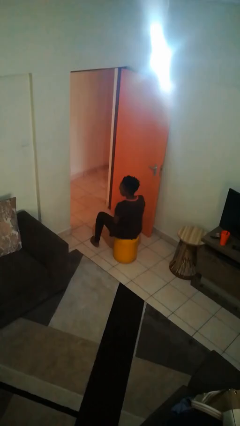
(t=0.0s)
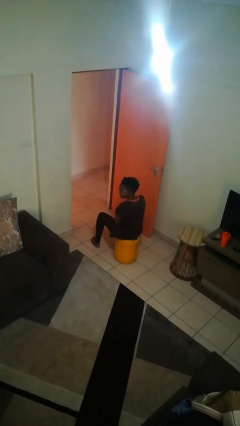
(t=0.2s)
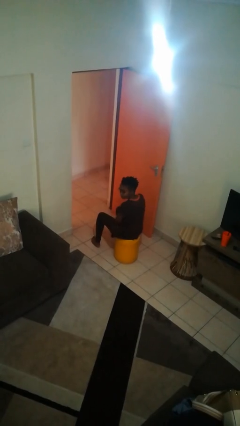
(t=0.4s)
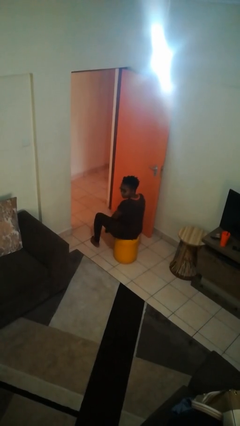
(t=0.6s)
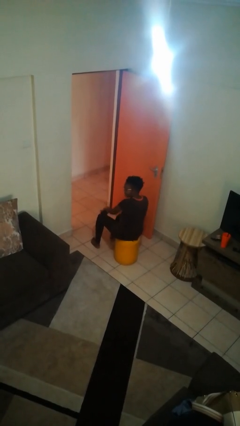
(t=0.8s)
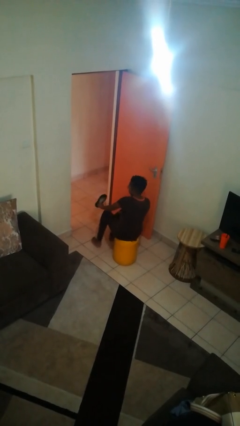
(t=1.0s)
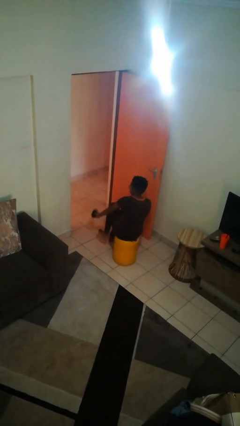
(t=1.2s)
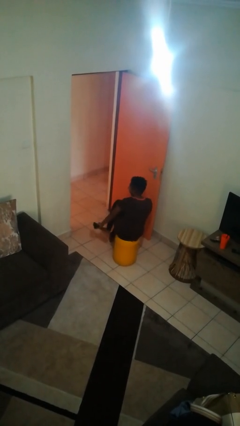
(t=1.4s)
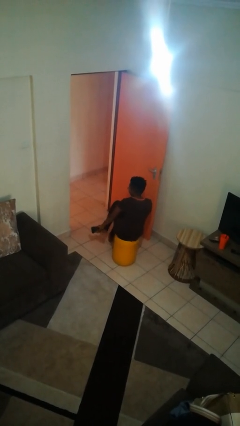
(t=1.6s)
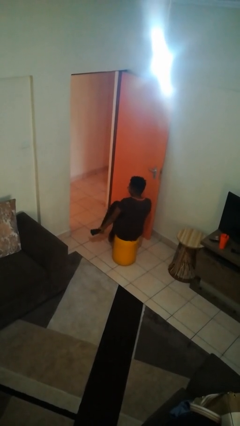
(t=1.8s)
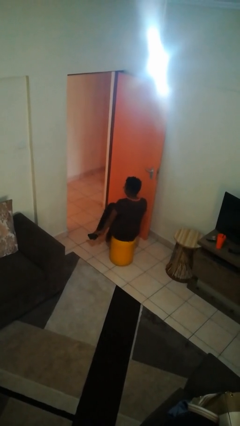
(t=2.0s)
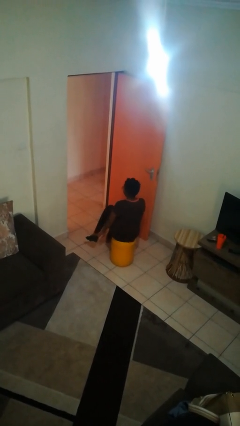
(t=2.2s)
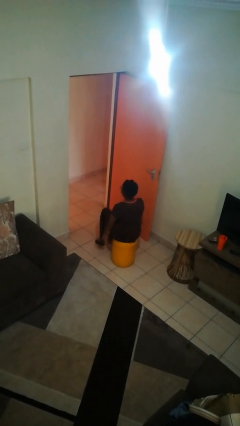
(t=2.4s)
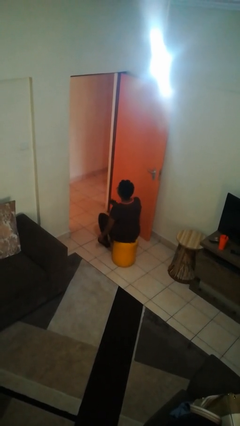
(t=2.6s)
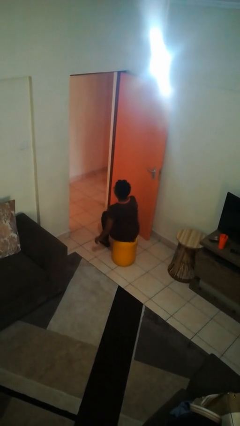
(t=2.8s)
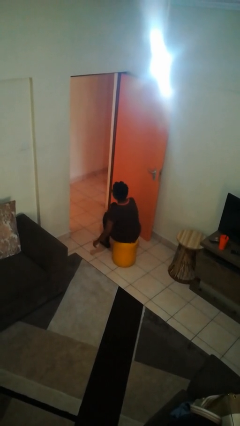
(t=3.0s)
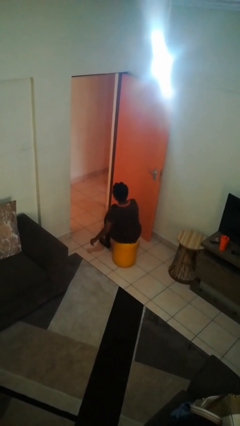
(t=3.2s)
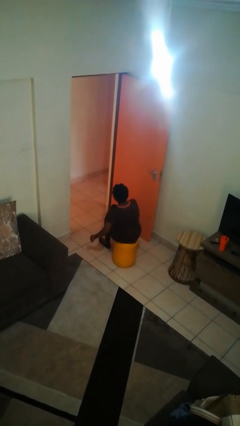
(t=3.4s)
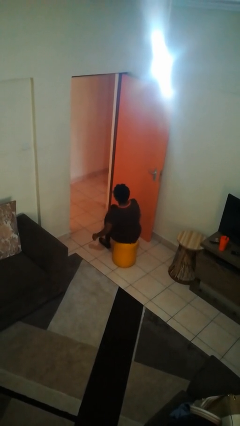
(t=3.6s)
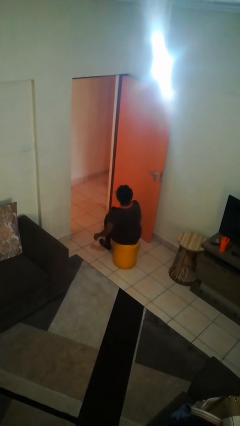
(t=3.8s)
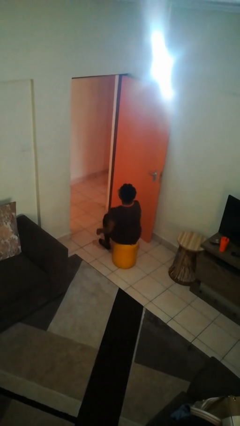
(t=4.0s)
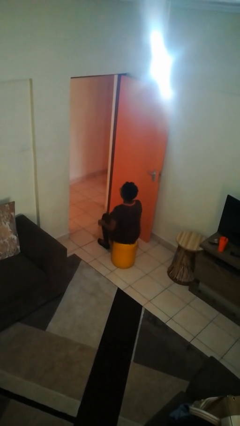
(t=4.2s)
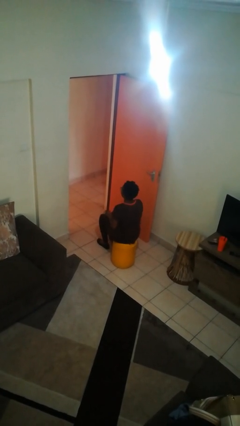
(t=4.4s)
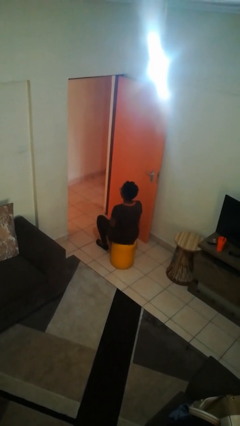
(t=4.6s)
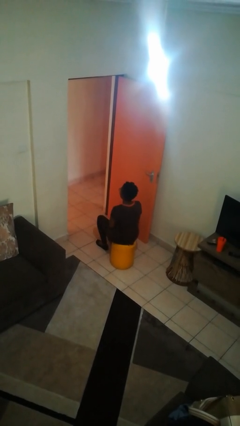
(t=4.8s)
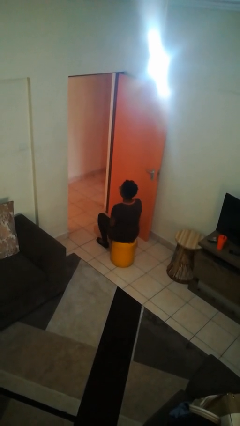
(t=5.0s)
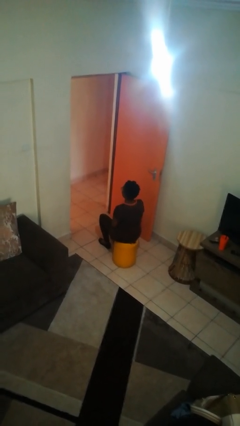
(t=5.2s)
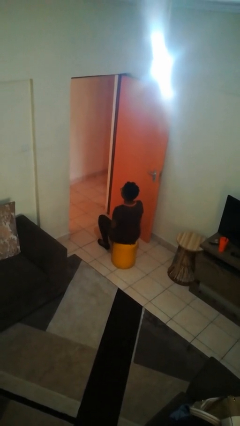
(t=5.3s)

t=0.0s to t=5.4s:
person puts on shoes

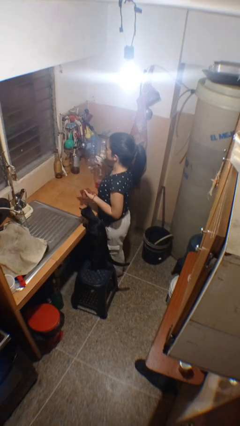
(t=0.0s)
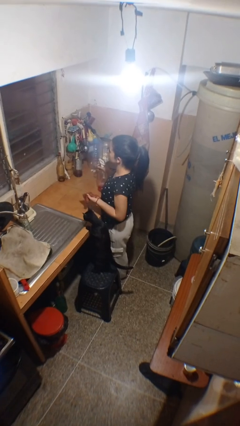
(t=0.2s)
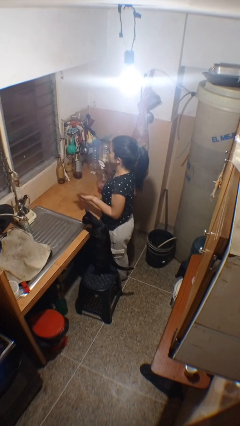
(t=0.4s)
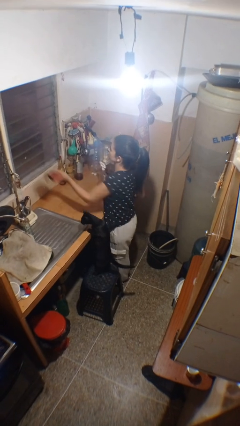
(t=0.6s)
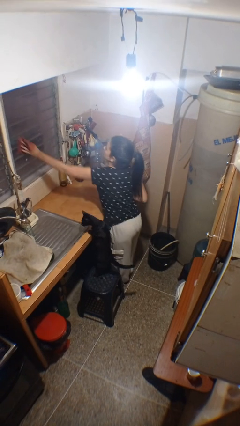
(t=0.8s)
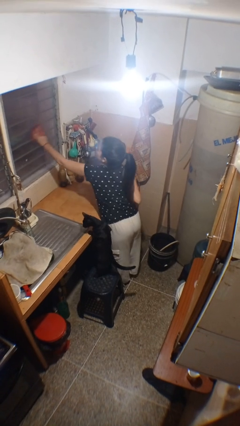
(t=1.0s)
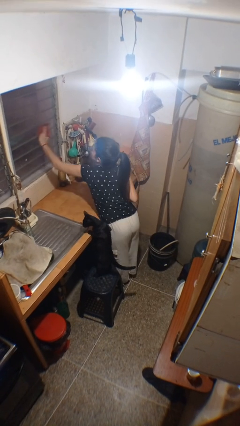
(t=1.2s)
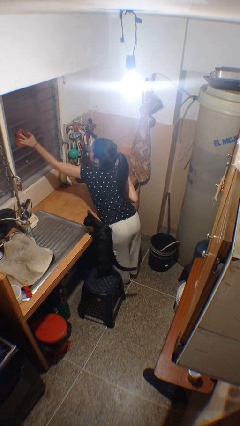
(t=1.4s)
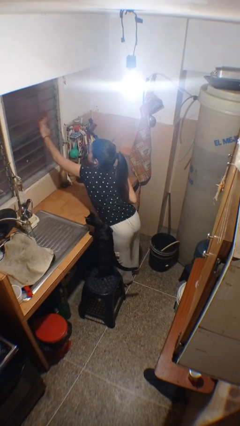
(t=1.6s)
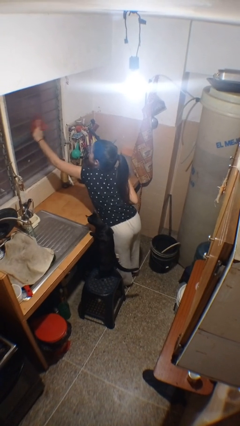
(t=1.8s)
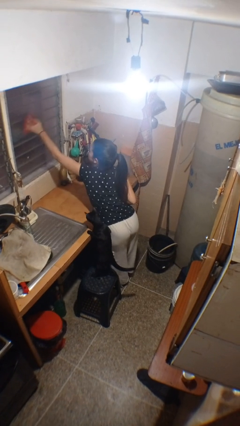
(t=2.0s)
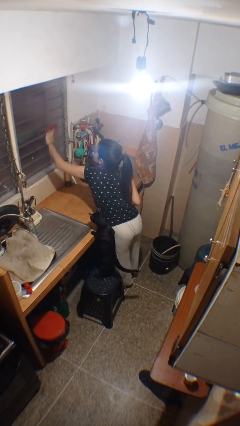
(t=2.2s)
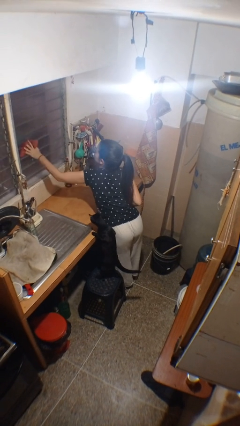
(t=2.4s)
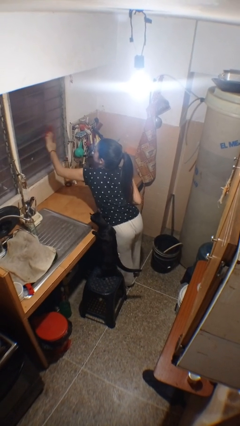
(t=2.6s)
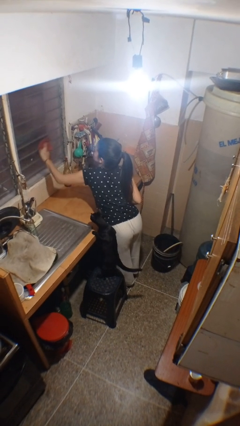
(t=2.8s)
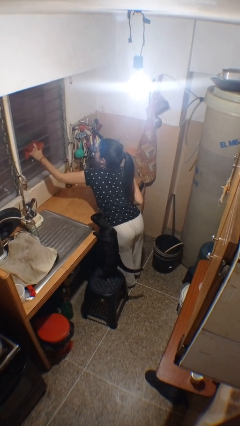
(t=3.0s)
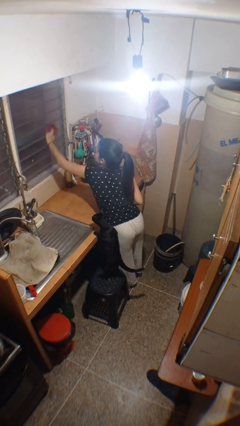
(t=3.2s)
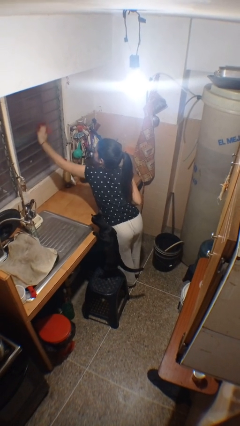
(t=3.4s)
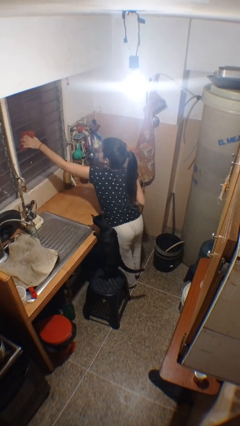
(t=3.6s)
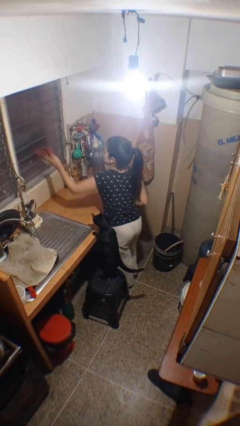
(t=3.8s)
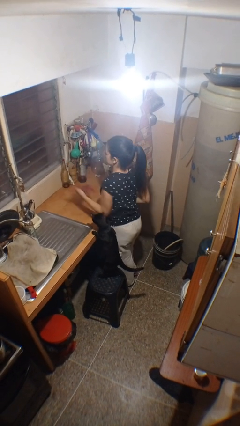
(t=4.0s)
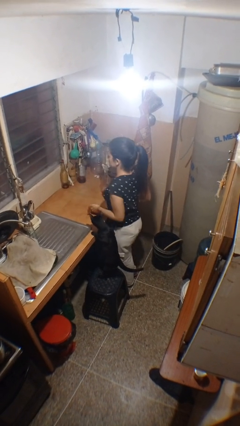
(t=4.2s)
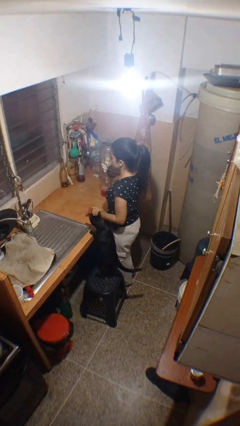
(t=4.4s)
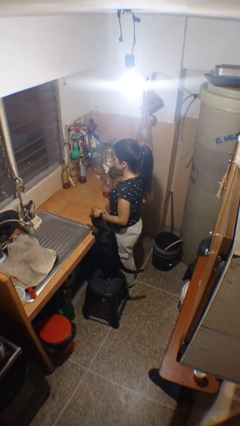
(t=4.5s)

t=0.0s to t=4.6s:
person washes window

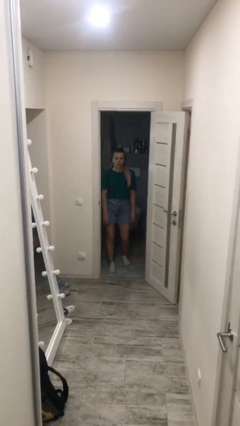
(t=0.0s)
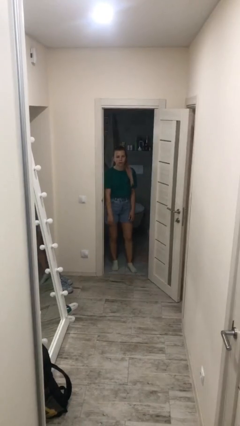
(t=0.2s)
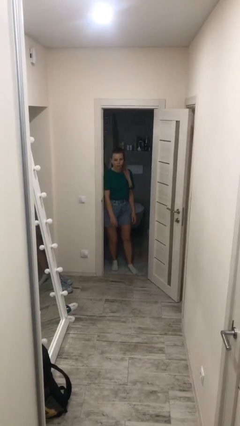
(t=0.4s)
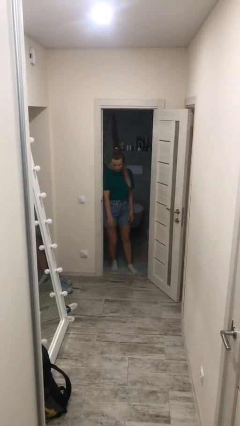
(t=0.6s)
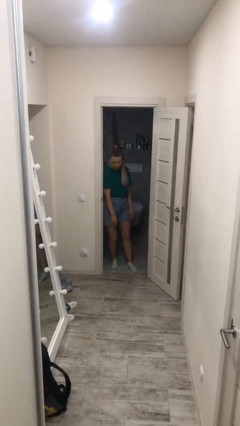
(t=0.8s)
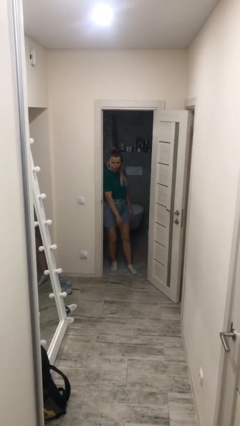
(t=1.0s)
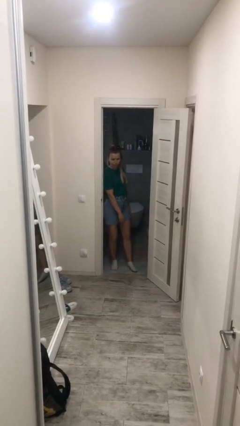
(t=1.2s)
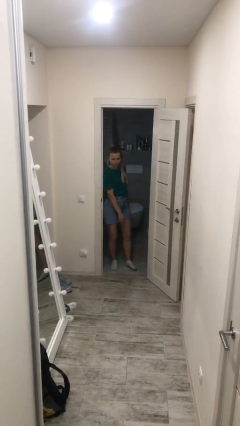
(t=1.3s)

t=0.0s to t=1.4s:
person bumps into wall

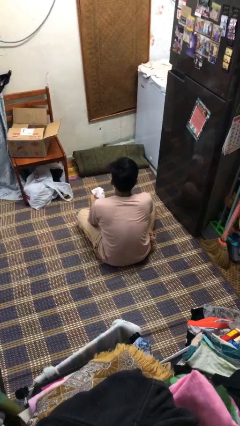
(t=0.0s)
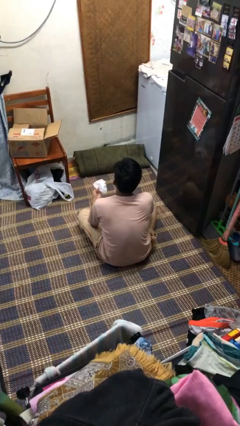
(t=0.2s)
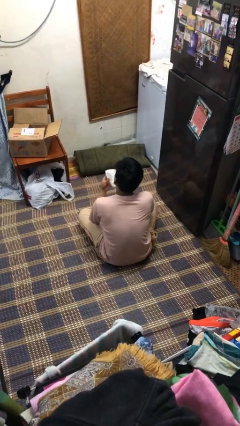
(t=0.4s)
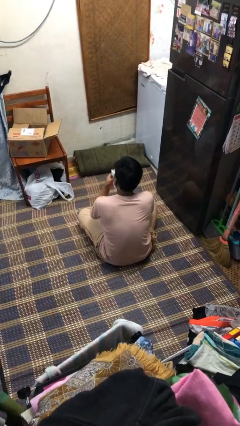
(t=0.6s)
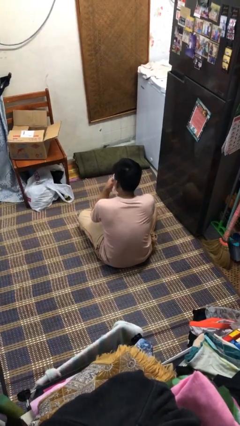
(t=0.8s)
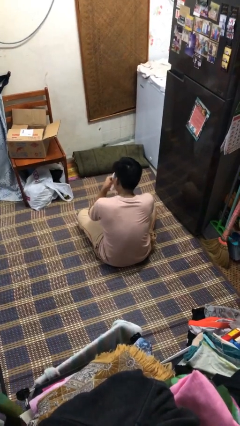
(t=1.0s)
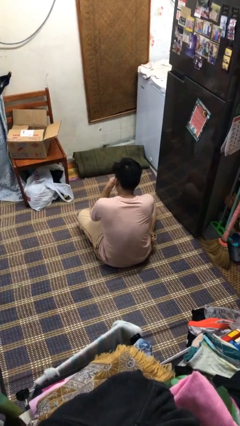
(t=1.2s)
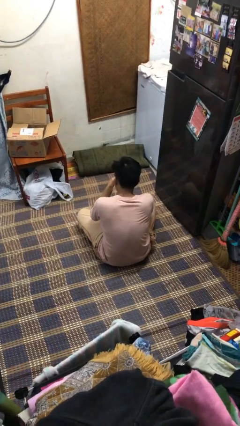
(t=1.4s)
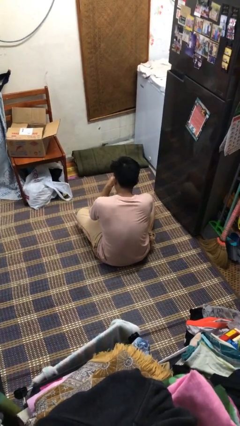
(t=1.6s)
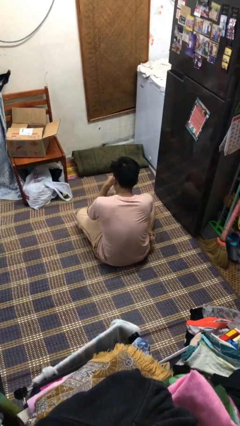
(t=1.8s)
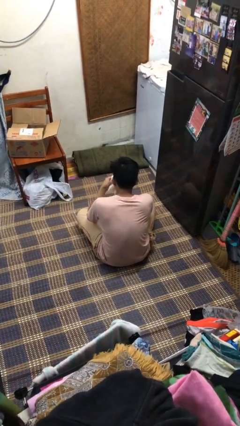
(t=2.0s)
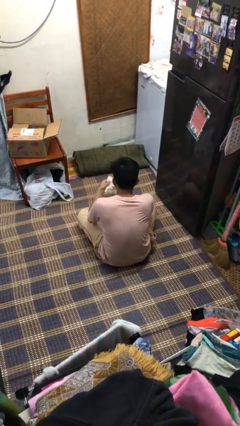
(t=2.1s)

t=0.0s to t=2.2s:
person blows nose

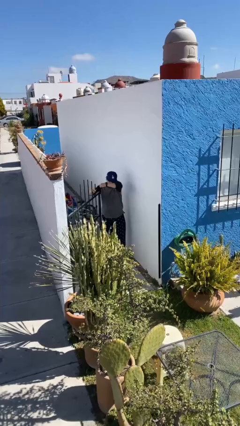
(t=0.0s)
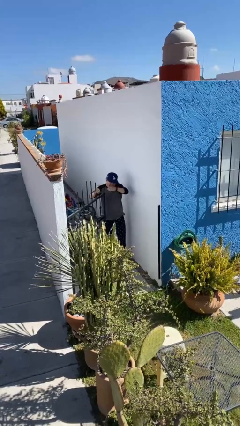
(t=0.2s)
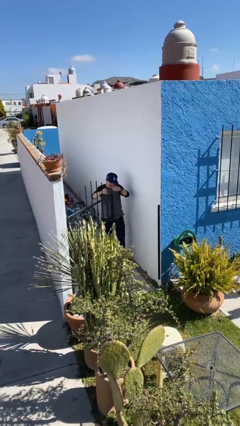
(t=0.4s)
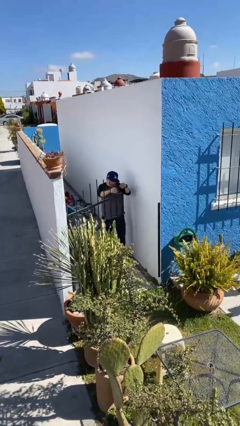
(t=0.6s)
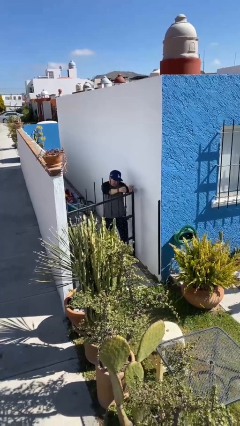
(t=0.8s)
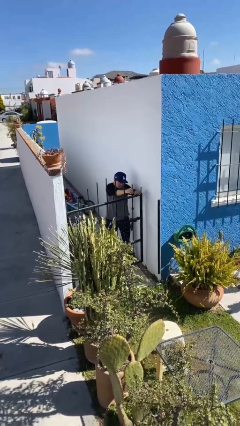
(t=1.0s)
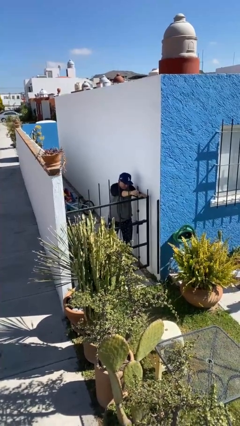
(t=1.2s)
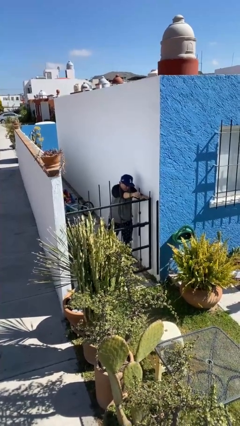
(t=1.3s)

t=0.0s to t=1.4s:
person closes facility door

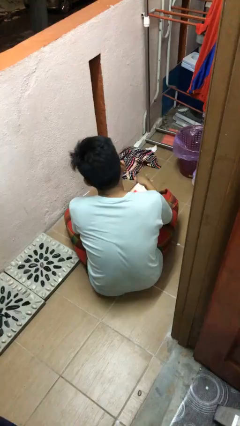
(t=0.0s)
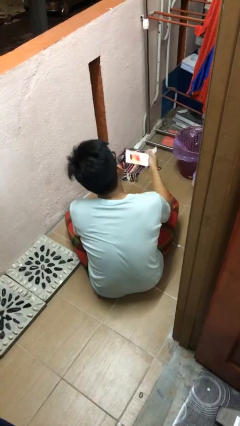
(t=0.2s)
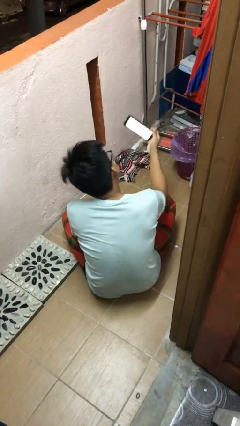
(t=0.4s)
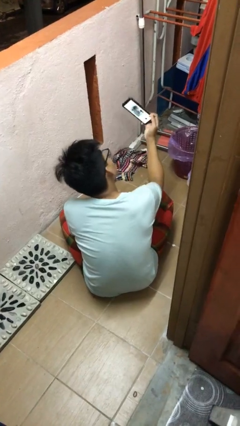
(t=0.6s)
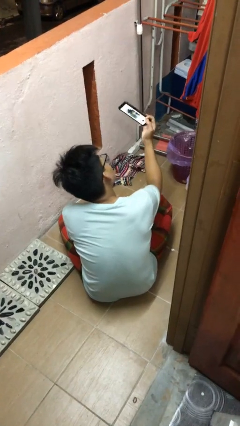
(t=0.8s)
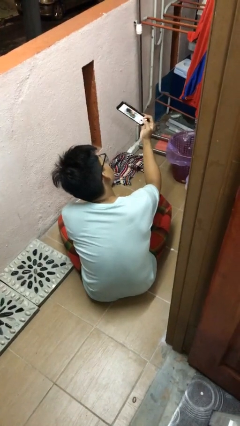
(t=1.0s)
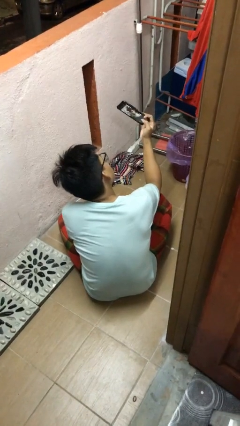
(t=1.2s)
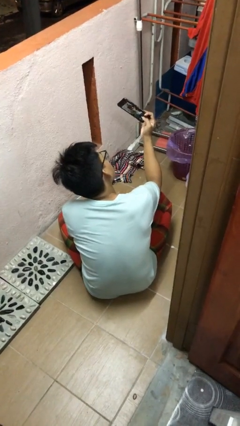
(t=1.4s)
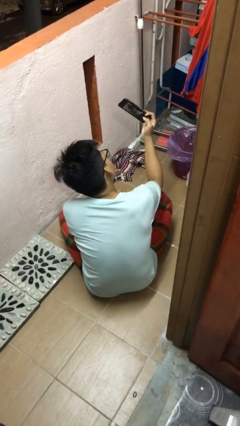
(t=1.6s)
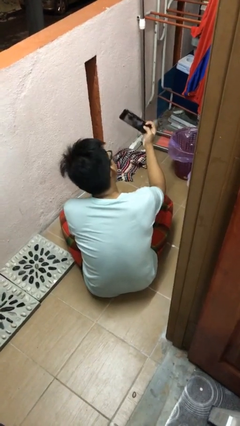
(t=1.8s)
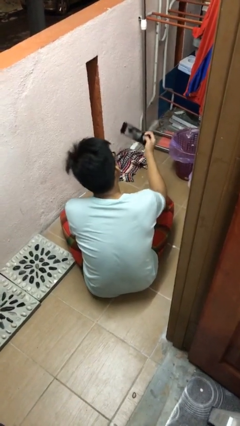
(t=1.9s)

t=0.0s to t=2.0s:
person takes selfie

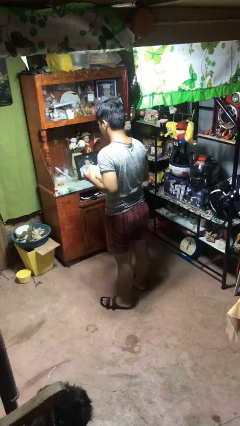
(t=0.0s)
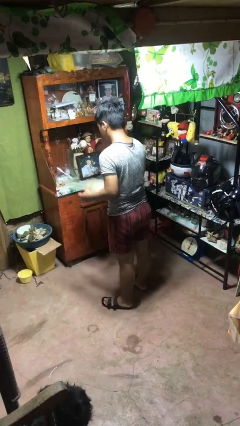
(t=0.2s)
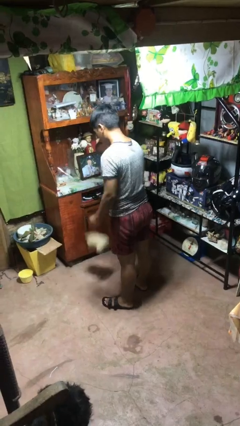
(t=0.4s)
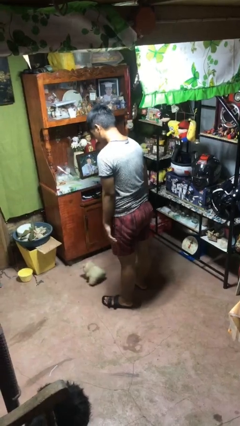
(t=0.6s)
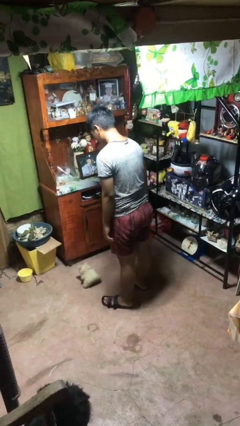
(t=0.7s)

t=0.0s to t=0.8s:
person drops object
